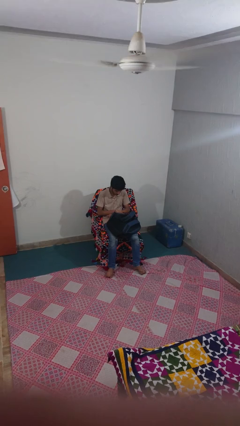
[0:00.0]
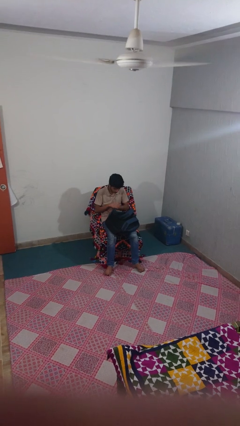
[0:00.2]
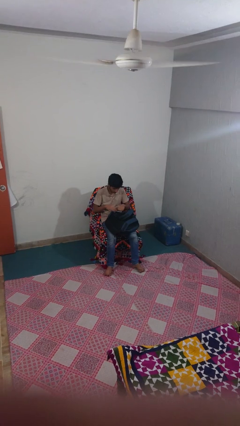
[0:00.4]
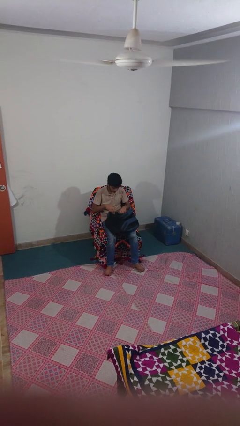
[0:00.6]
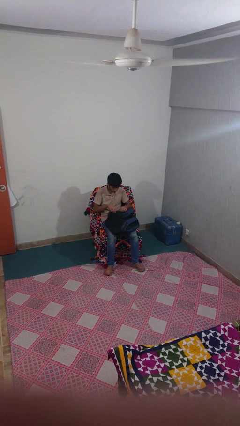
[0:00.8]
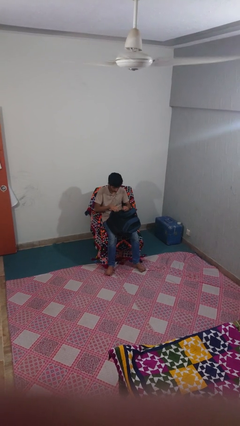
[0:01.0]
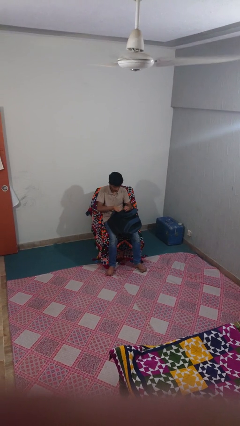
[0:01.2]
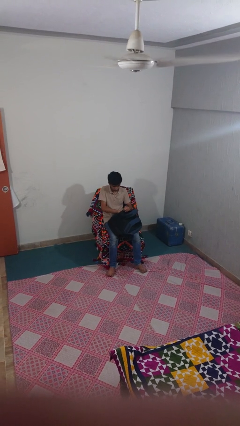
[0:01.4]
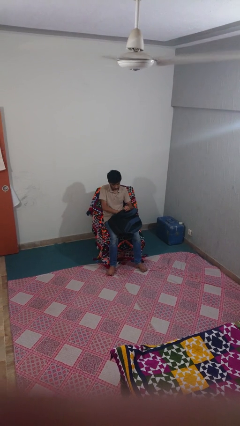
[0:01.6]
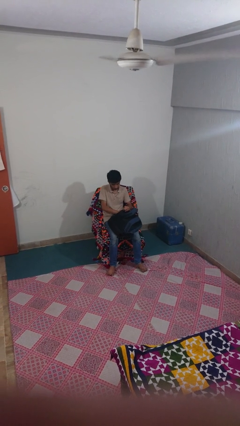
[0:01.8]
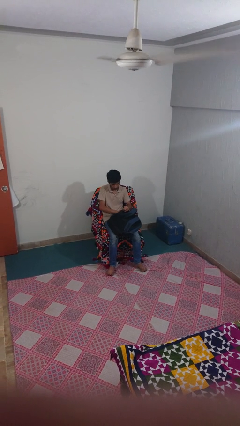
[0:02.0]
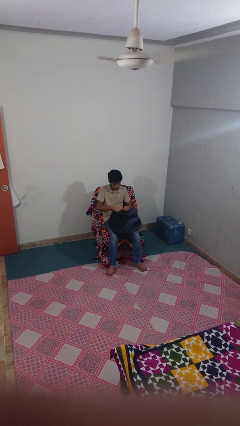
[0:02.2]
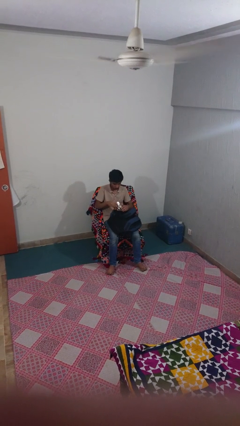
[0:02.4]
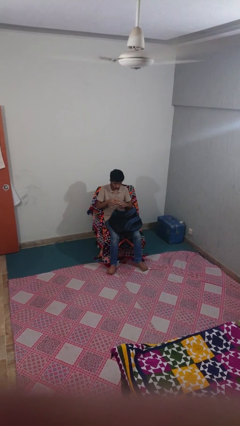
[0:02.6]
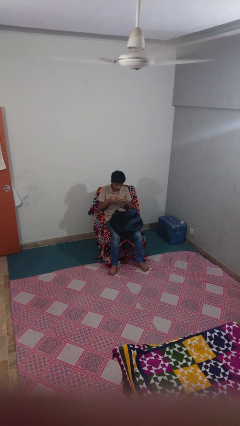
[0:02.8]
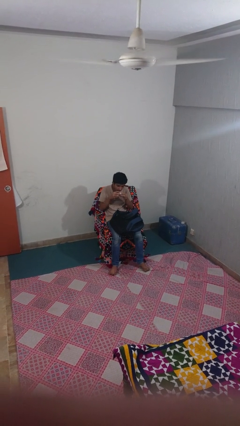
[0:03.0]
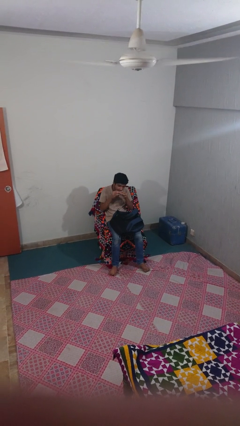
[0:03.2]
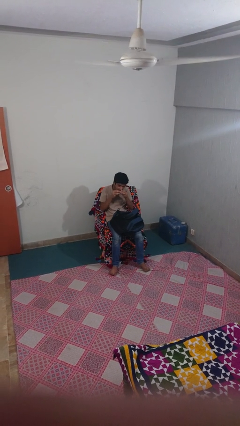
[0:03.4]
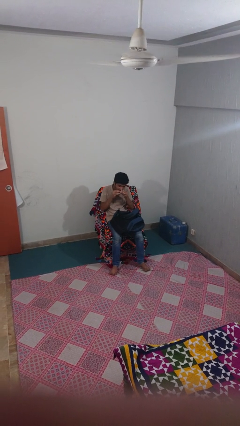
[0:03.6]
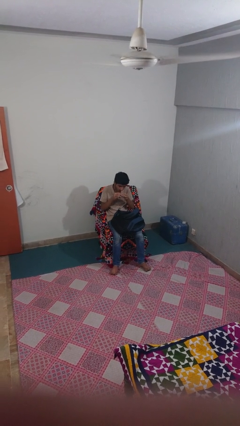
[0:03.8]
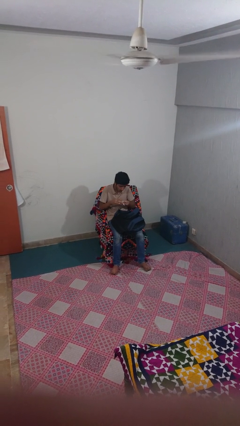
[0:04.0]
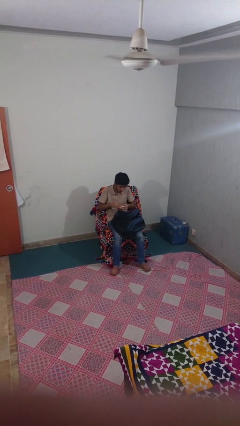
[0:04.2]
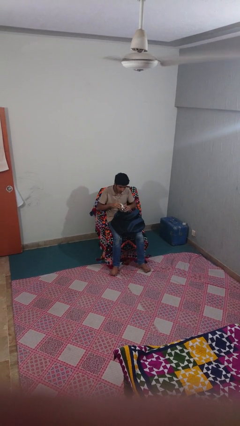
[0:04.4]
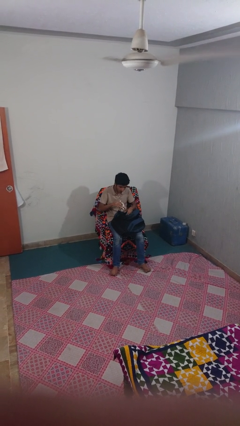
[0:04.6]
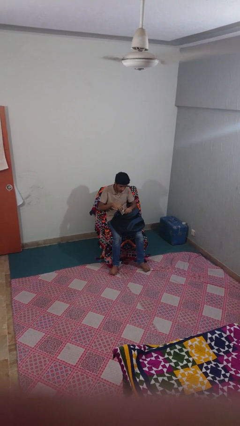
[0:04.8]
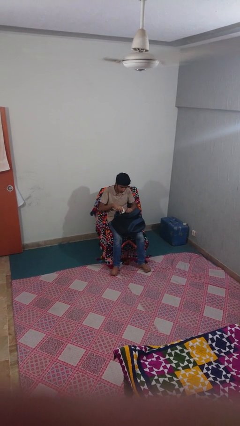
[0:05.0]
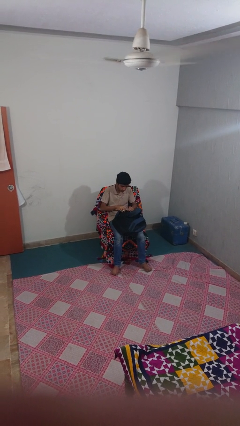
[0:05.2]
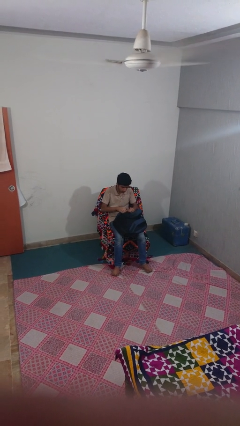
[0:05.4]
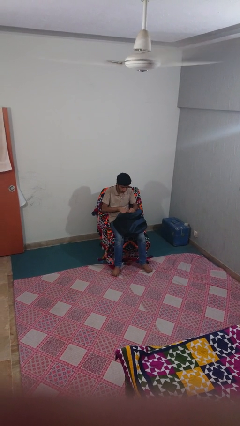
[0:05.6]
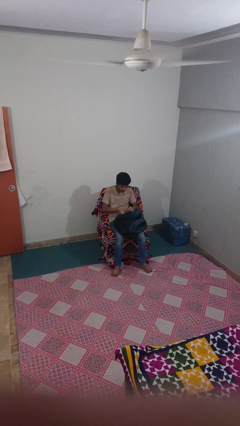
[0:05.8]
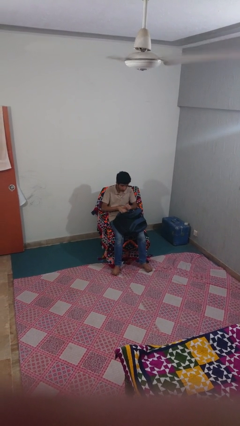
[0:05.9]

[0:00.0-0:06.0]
person eats snack from bag

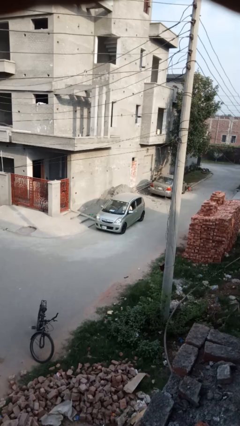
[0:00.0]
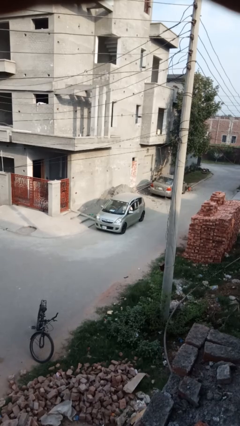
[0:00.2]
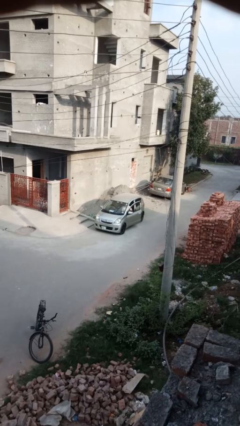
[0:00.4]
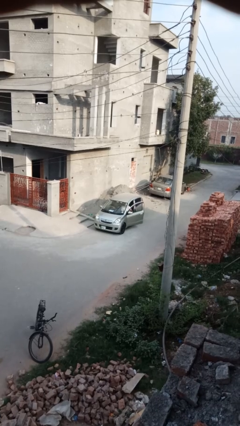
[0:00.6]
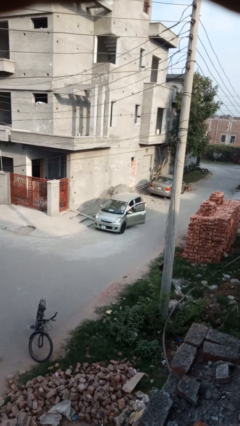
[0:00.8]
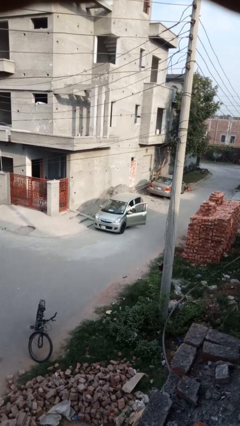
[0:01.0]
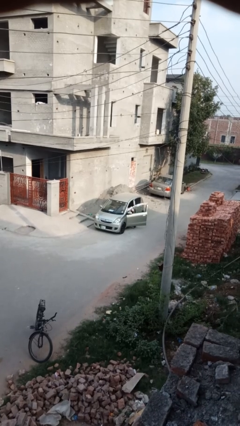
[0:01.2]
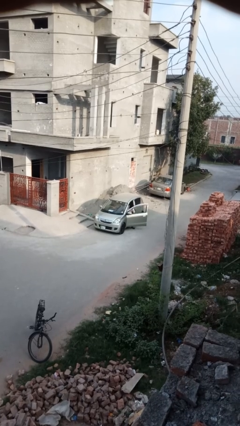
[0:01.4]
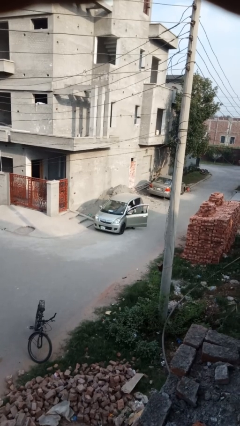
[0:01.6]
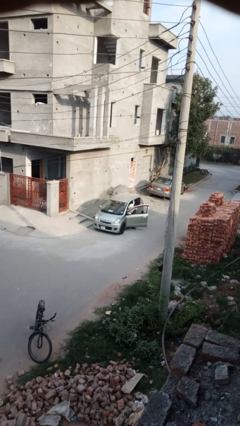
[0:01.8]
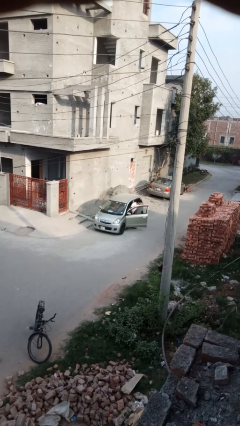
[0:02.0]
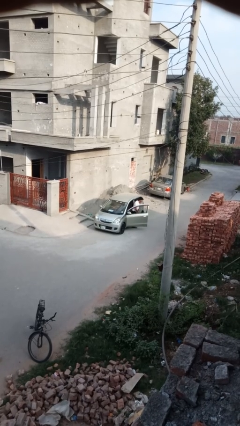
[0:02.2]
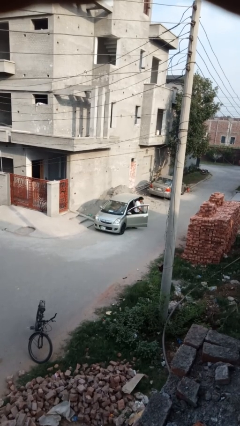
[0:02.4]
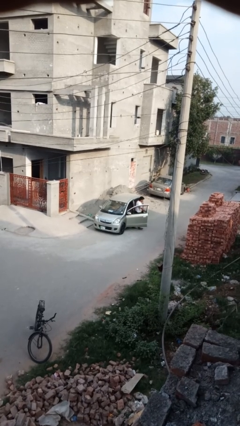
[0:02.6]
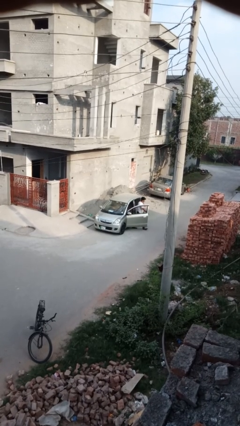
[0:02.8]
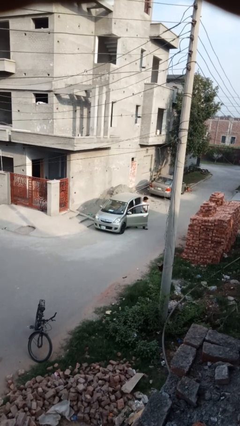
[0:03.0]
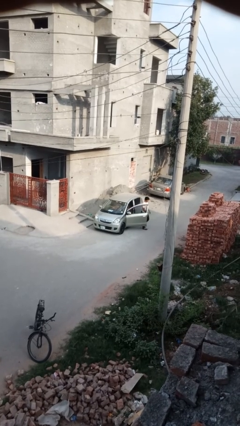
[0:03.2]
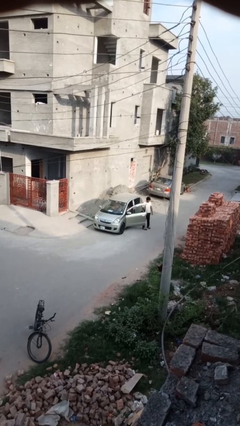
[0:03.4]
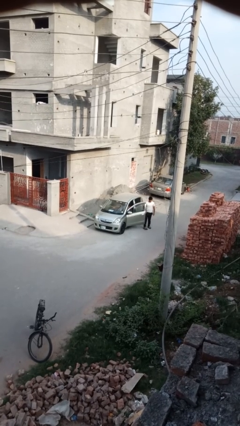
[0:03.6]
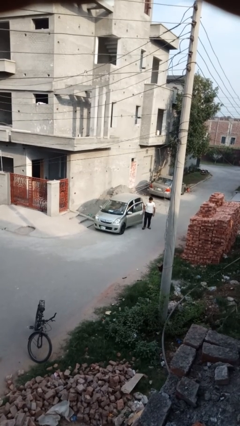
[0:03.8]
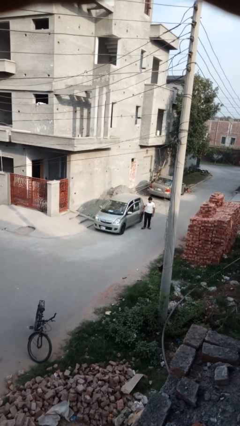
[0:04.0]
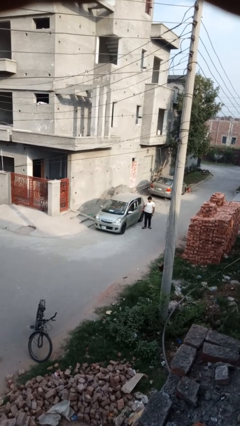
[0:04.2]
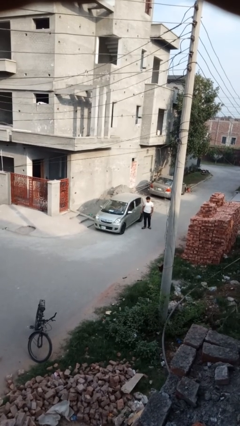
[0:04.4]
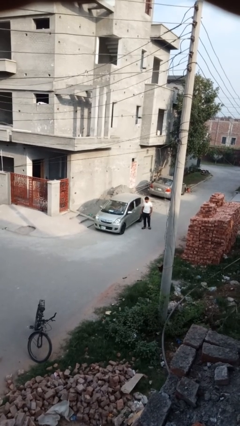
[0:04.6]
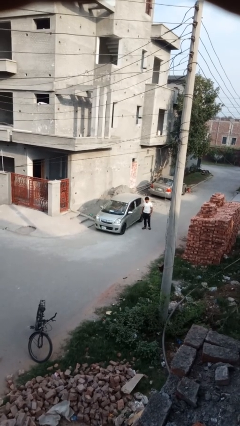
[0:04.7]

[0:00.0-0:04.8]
car drops off person

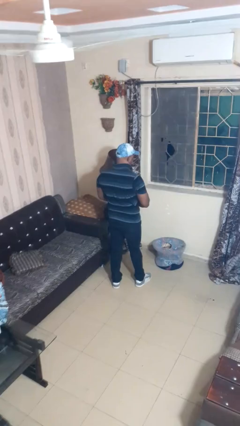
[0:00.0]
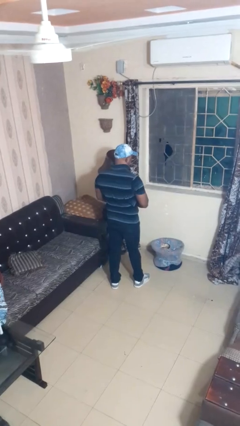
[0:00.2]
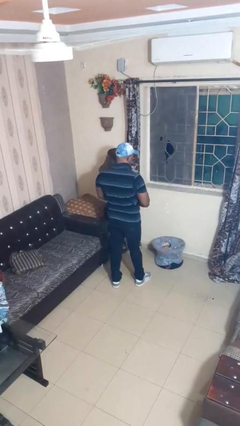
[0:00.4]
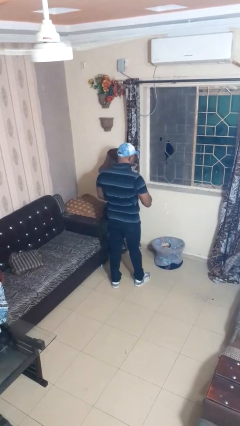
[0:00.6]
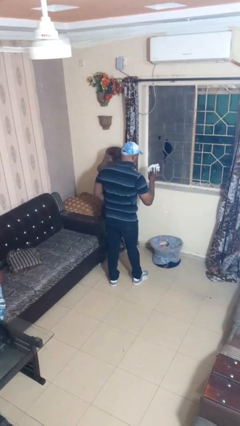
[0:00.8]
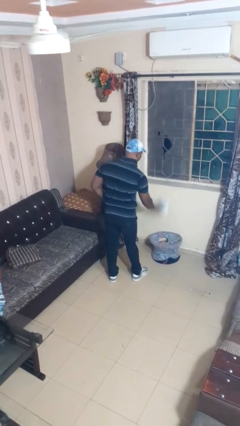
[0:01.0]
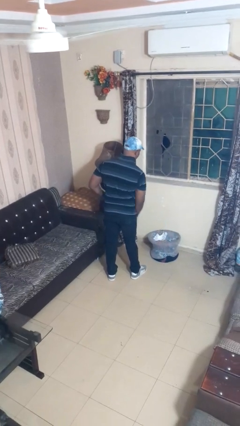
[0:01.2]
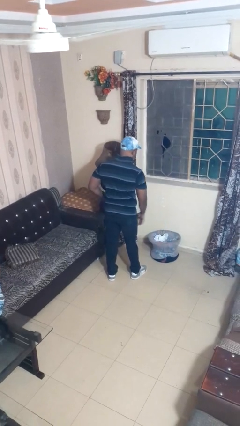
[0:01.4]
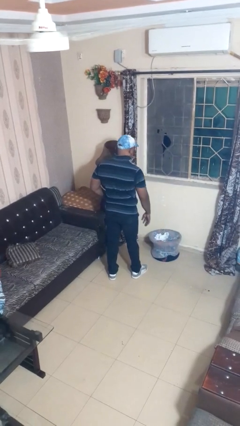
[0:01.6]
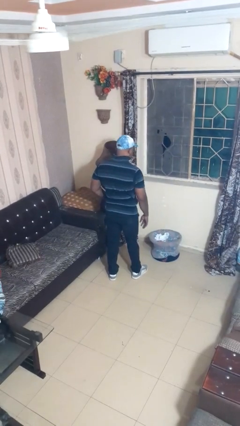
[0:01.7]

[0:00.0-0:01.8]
person puts object into basket

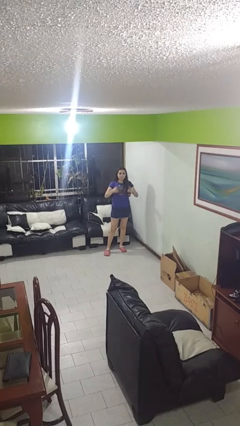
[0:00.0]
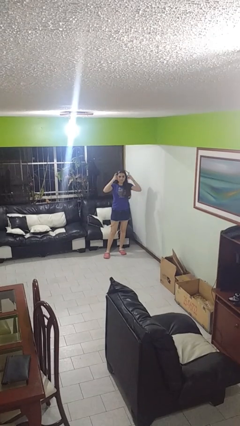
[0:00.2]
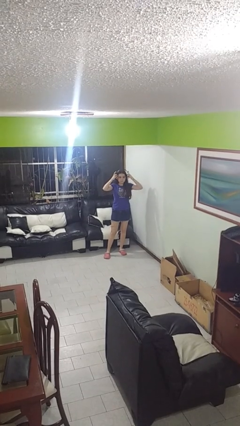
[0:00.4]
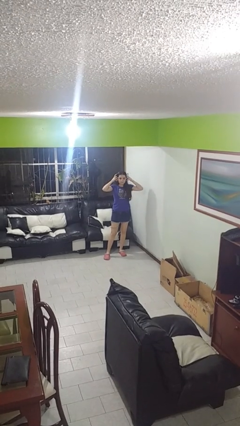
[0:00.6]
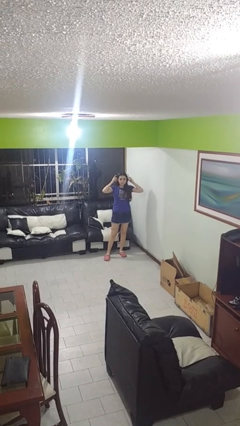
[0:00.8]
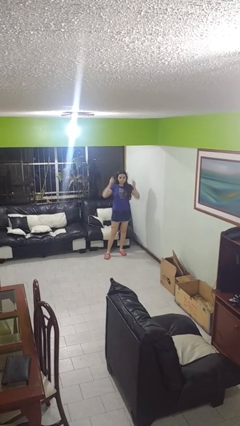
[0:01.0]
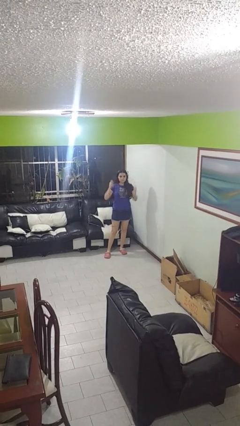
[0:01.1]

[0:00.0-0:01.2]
person puts on headphones

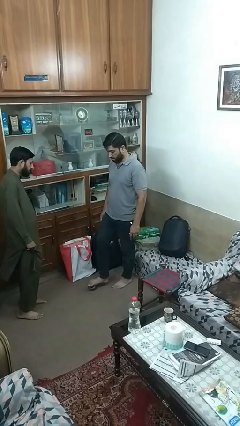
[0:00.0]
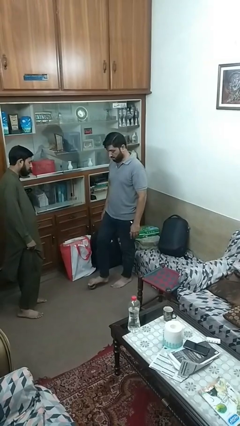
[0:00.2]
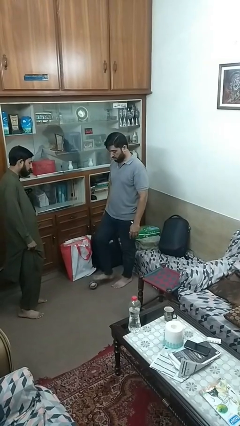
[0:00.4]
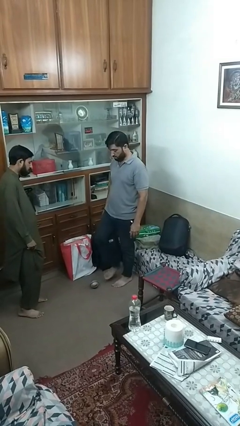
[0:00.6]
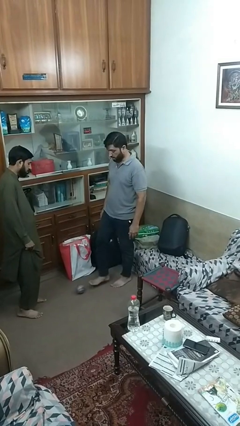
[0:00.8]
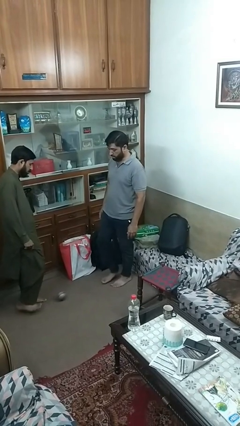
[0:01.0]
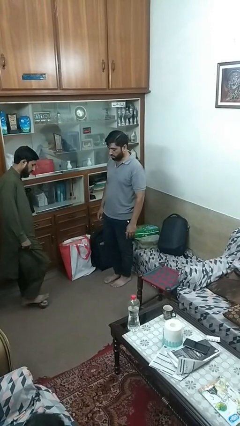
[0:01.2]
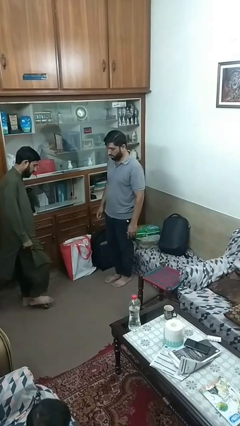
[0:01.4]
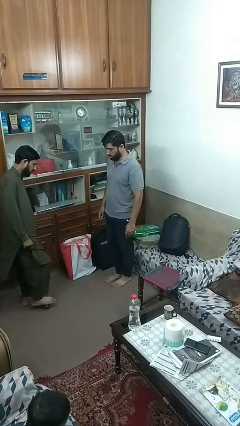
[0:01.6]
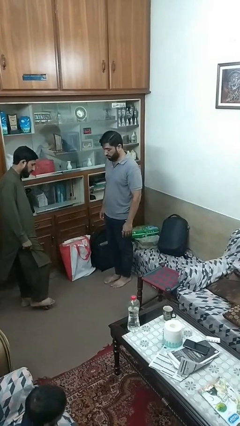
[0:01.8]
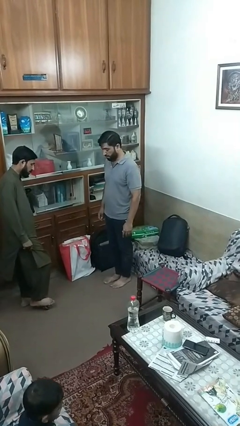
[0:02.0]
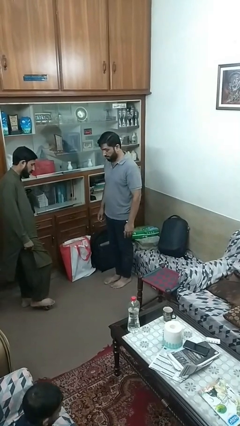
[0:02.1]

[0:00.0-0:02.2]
person kicks object to person

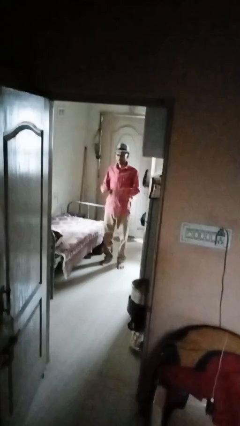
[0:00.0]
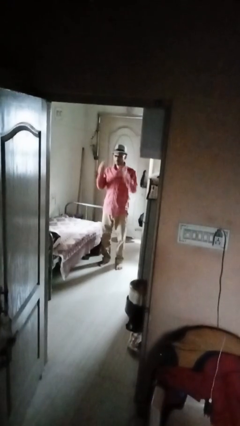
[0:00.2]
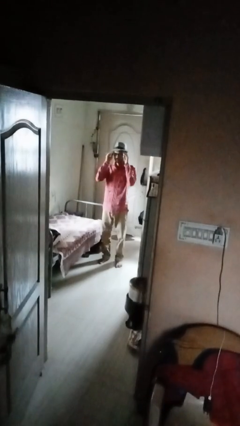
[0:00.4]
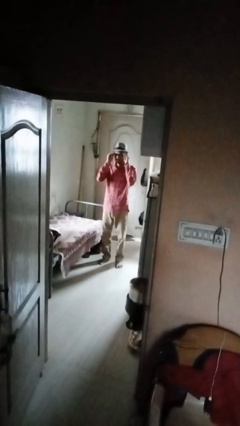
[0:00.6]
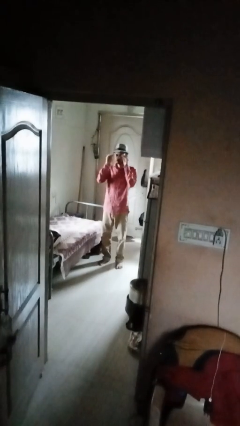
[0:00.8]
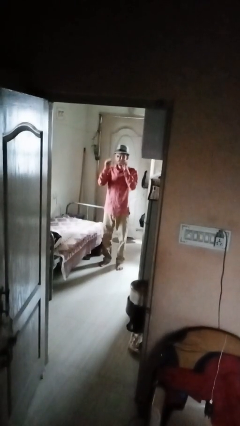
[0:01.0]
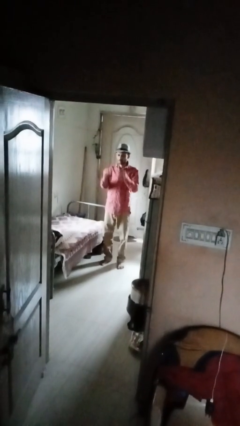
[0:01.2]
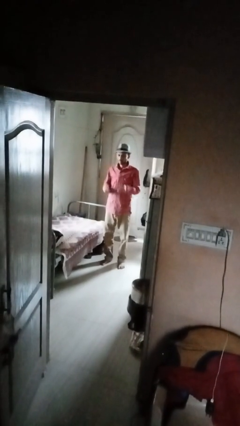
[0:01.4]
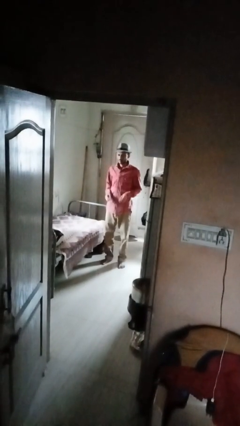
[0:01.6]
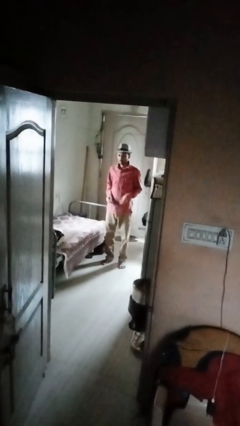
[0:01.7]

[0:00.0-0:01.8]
person takes off glasses
